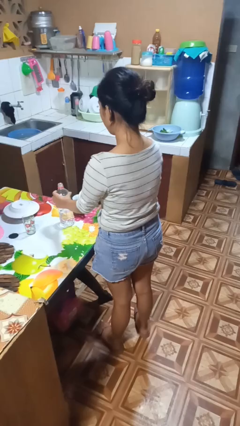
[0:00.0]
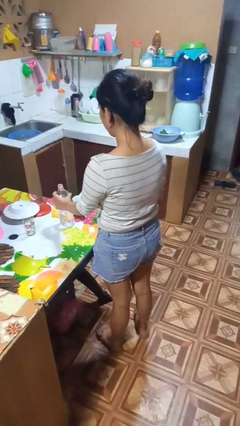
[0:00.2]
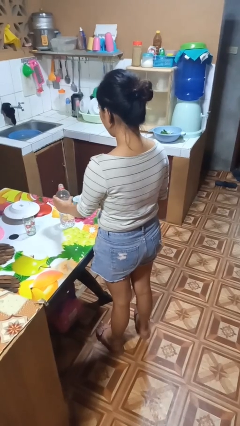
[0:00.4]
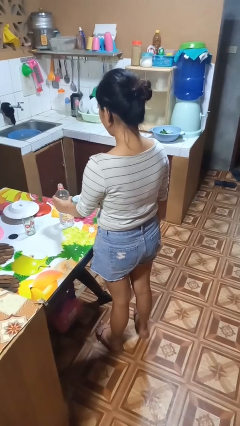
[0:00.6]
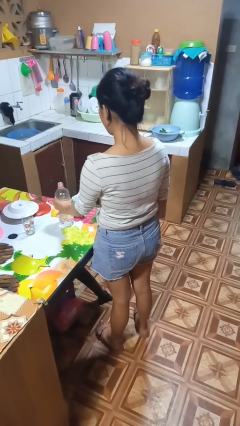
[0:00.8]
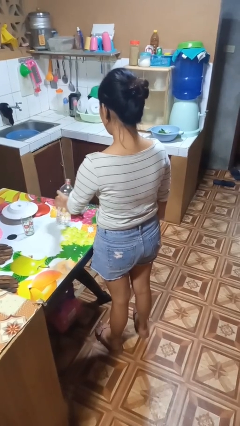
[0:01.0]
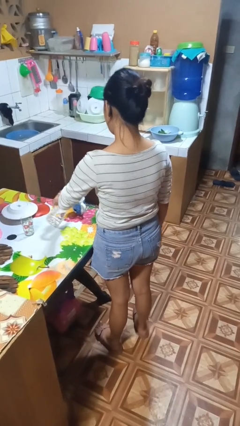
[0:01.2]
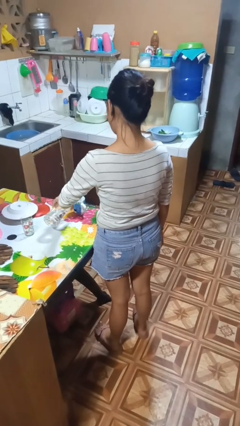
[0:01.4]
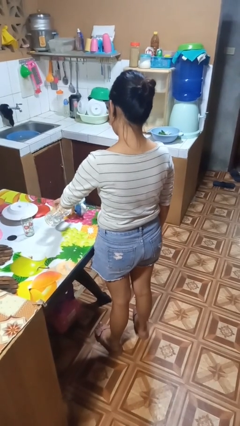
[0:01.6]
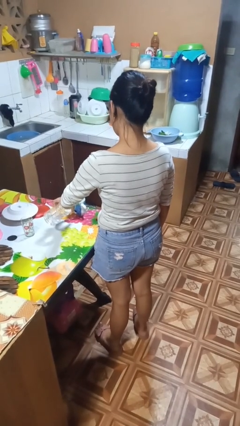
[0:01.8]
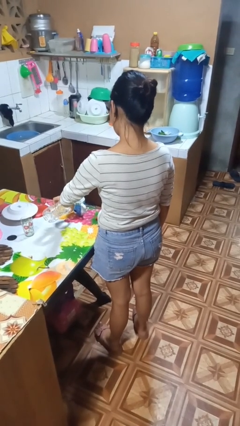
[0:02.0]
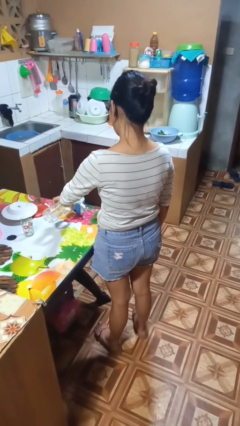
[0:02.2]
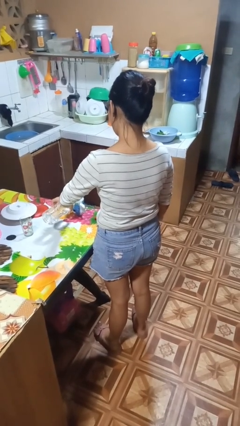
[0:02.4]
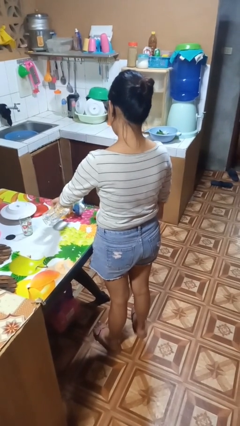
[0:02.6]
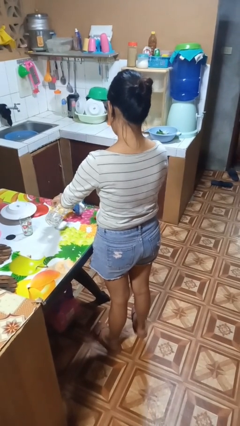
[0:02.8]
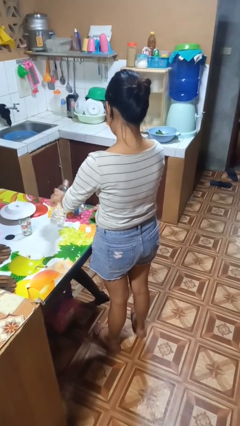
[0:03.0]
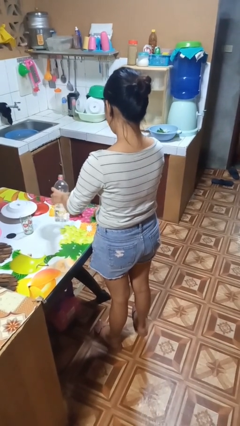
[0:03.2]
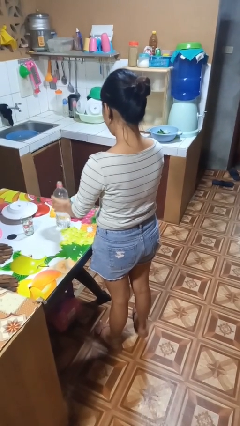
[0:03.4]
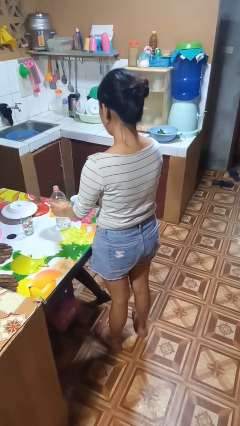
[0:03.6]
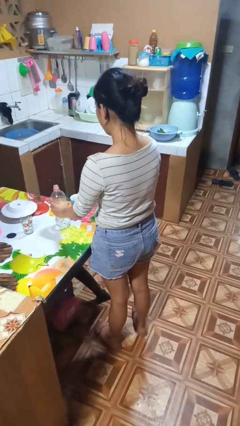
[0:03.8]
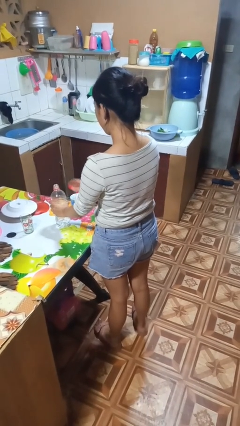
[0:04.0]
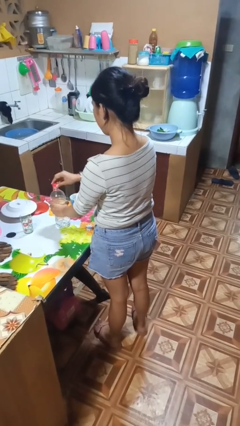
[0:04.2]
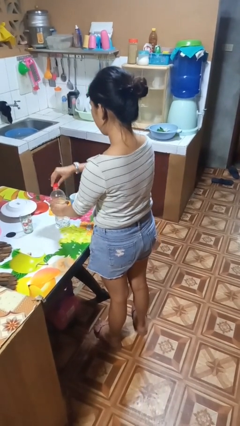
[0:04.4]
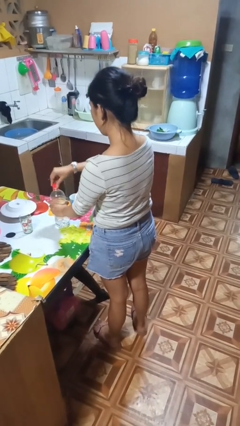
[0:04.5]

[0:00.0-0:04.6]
person pours liquid into cup

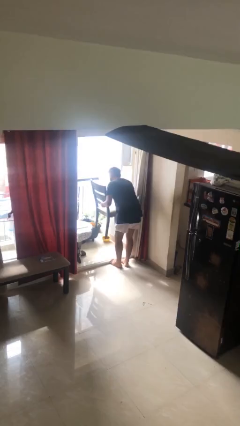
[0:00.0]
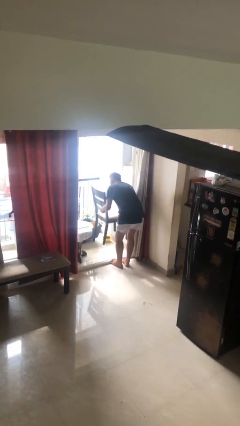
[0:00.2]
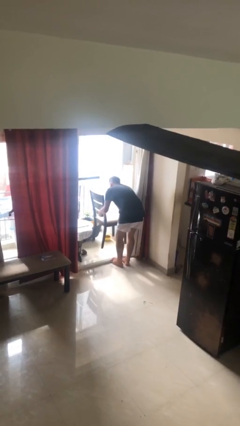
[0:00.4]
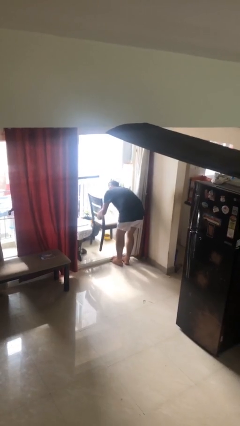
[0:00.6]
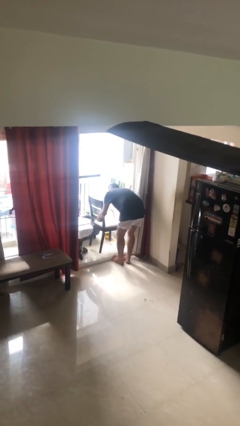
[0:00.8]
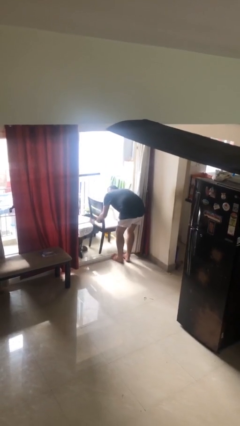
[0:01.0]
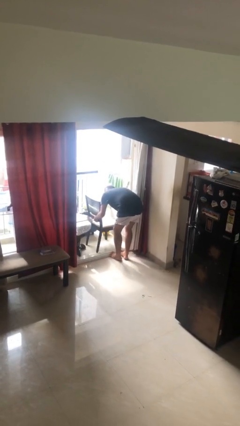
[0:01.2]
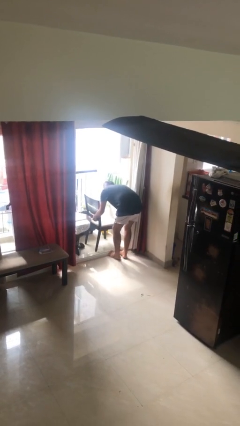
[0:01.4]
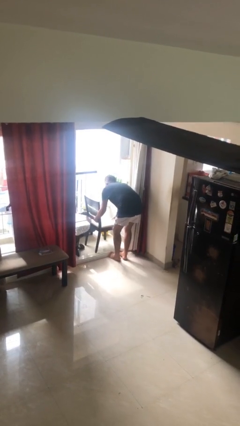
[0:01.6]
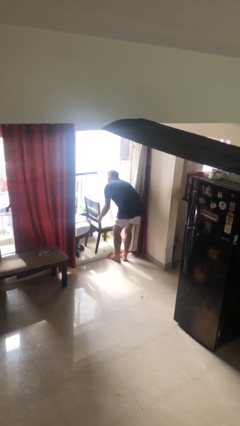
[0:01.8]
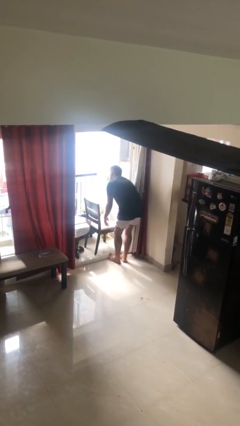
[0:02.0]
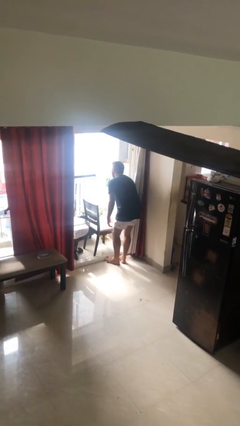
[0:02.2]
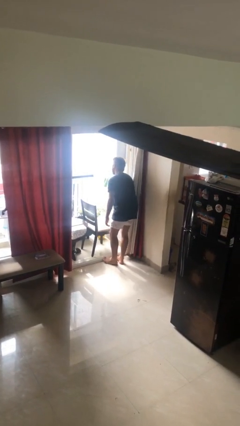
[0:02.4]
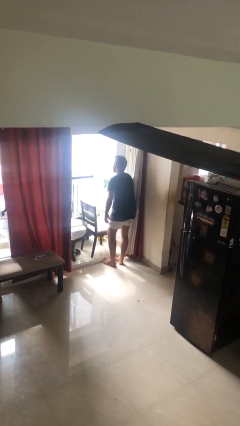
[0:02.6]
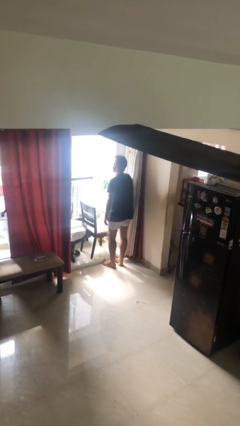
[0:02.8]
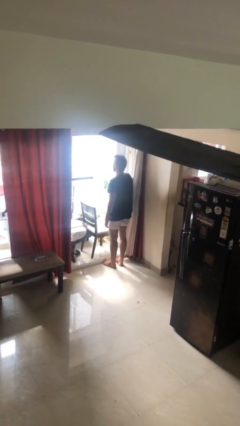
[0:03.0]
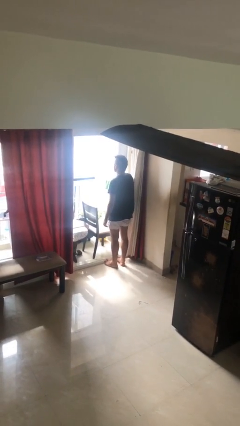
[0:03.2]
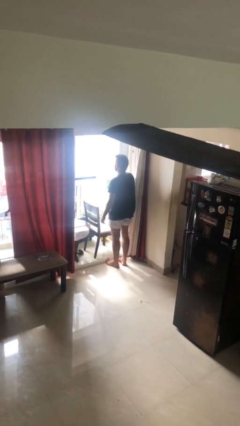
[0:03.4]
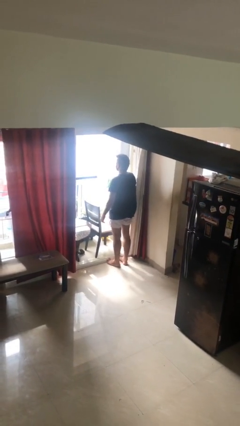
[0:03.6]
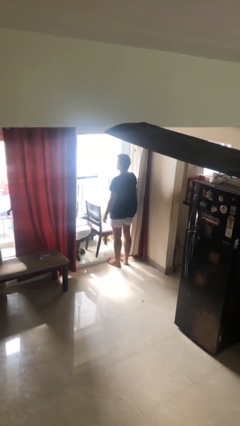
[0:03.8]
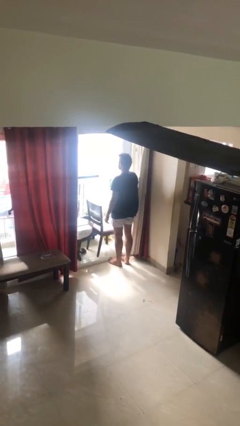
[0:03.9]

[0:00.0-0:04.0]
person puts down object on floor

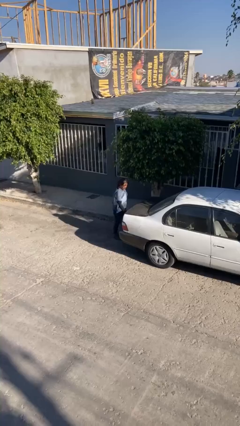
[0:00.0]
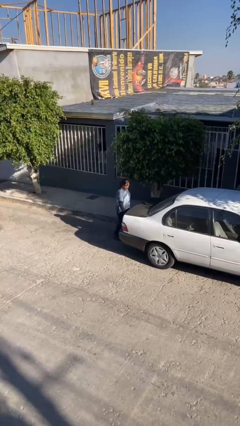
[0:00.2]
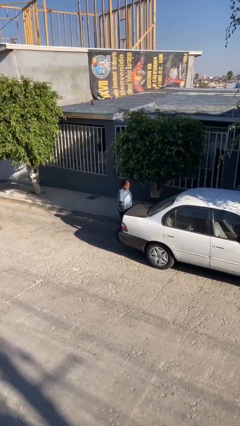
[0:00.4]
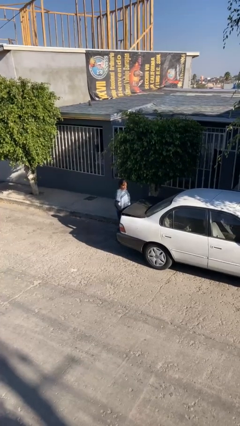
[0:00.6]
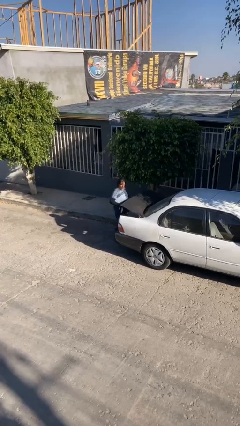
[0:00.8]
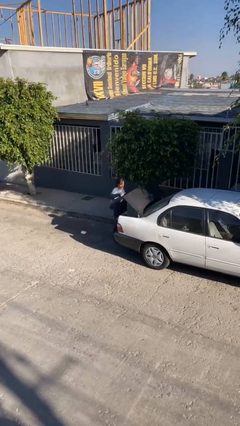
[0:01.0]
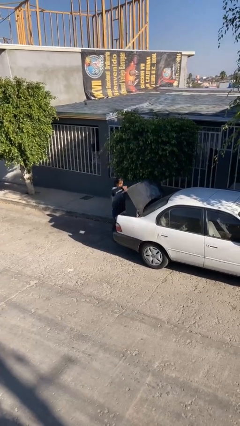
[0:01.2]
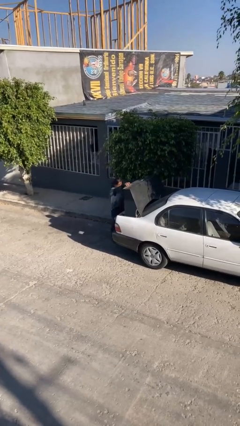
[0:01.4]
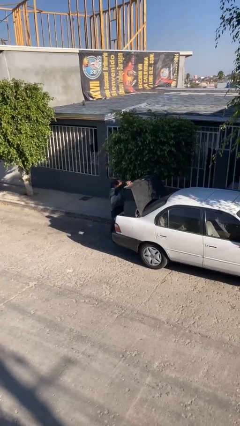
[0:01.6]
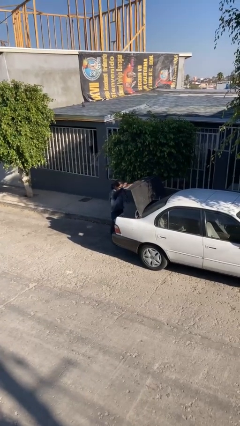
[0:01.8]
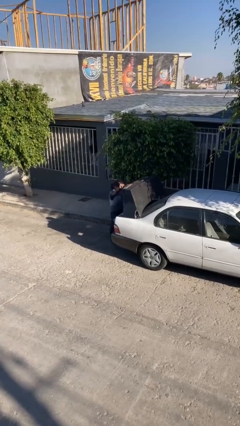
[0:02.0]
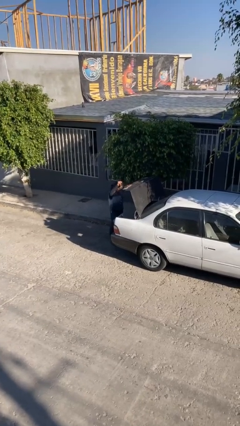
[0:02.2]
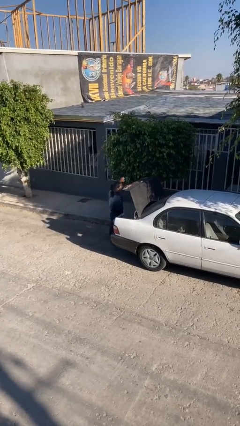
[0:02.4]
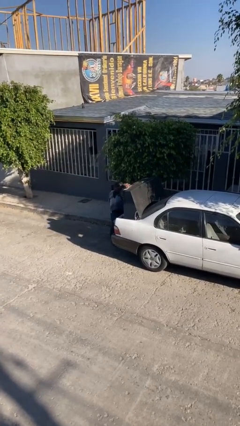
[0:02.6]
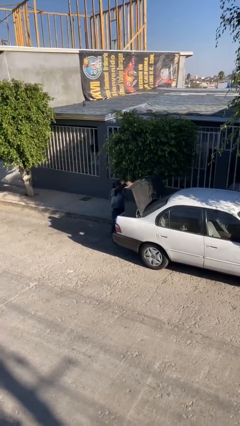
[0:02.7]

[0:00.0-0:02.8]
person opens car trunk

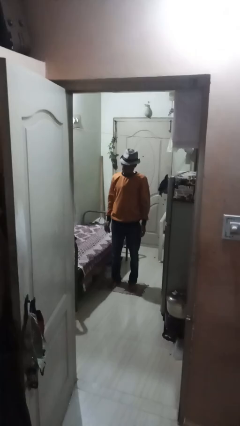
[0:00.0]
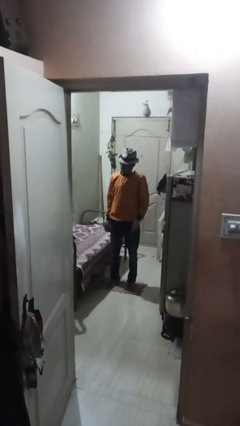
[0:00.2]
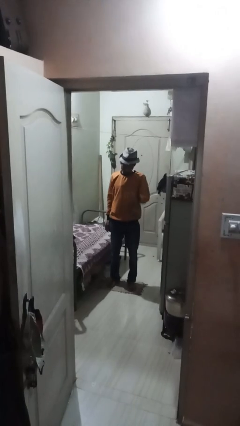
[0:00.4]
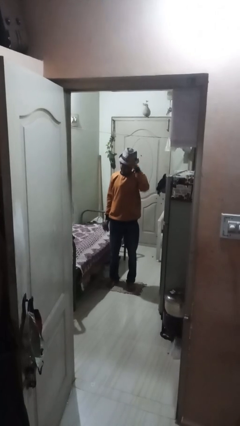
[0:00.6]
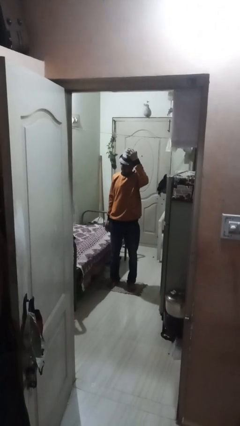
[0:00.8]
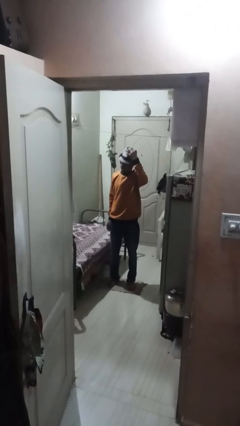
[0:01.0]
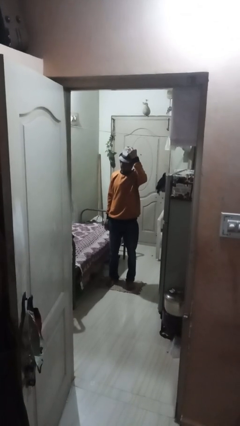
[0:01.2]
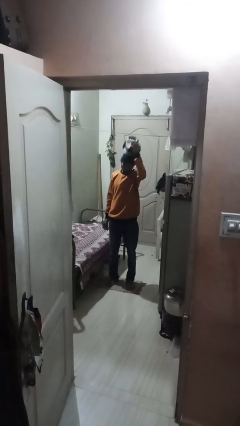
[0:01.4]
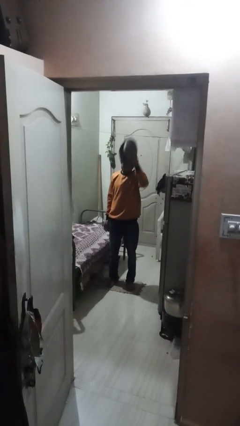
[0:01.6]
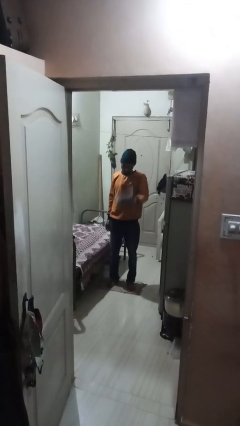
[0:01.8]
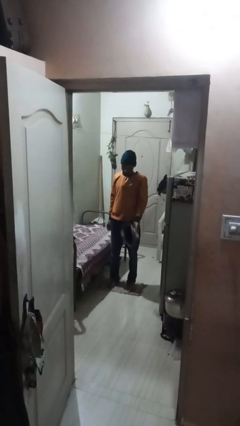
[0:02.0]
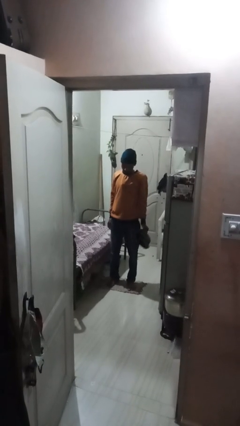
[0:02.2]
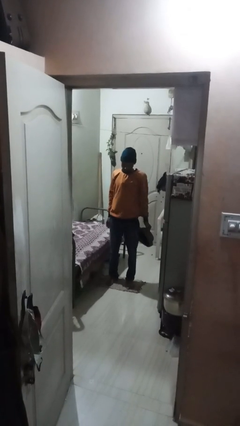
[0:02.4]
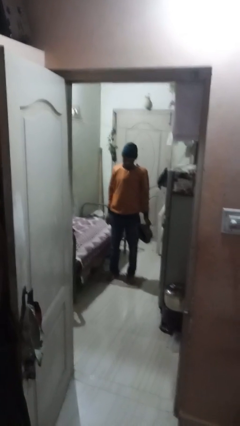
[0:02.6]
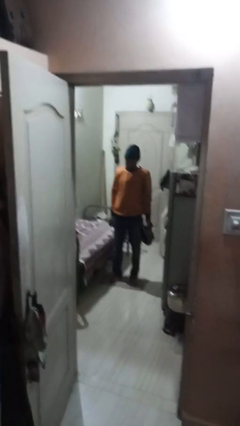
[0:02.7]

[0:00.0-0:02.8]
person takes off hat

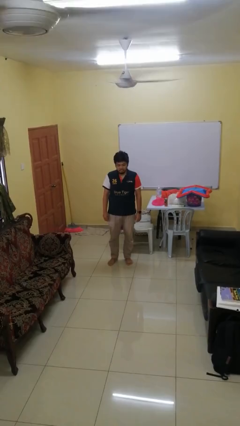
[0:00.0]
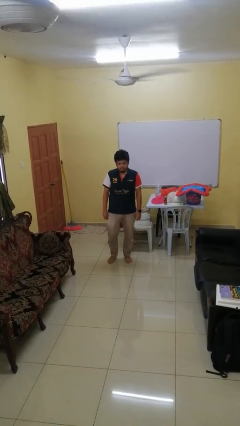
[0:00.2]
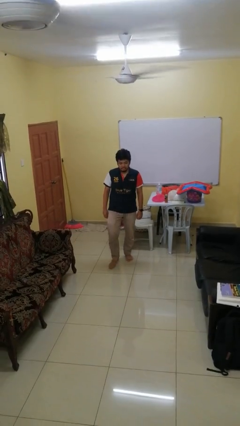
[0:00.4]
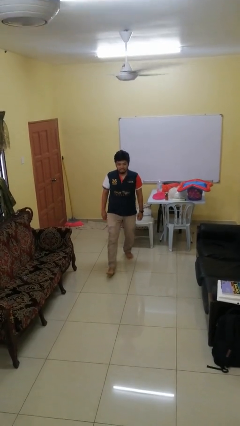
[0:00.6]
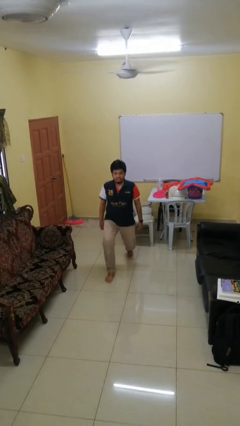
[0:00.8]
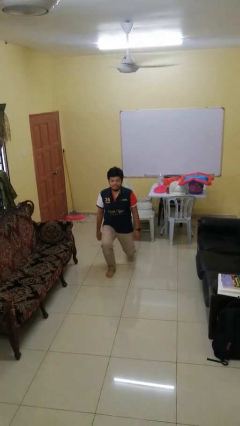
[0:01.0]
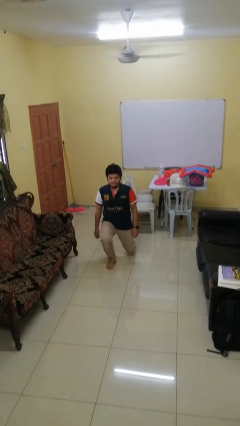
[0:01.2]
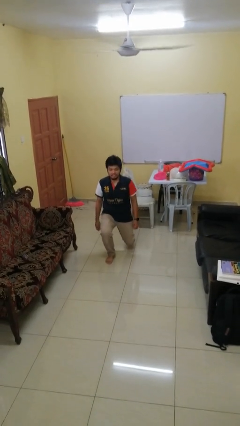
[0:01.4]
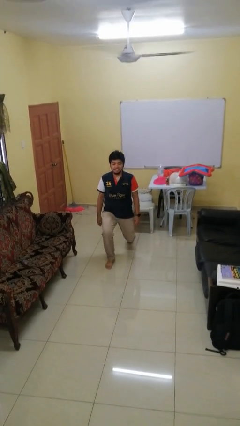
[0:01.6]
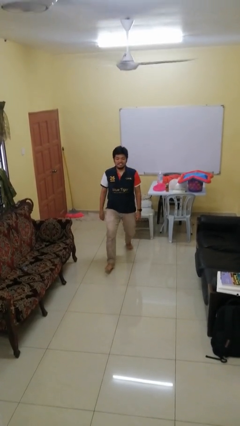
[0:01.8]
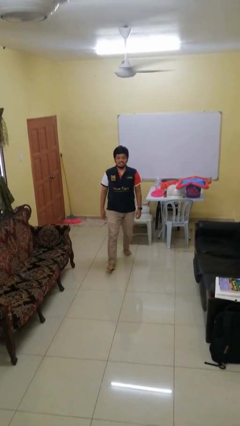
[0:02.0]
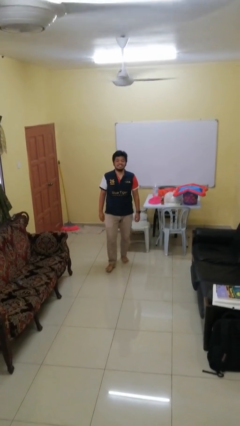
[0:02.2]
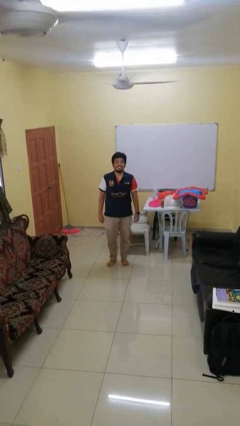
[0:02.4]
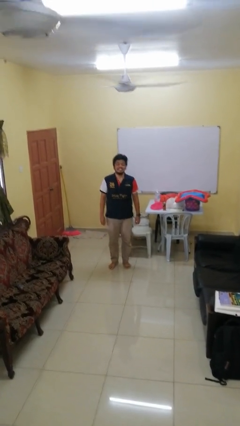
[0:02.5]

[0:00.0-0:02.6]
person exercises with lunges

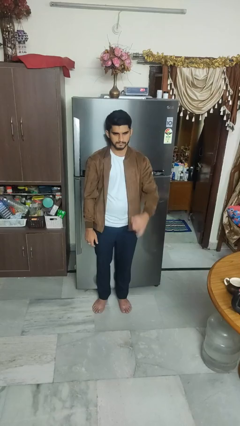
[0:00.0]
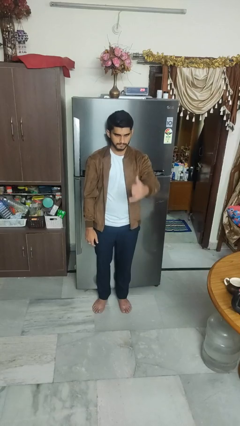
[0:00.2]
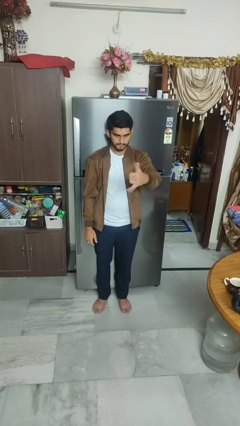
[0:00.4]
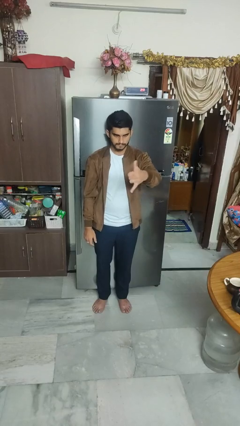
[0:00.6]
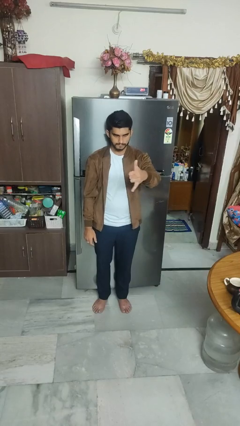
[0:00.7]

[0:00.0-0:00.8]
person gestures hang loose
